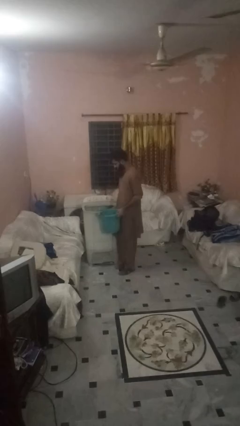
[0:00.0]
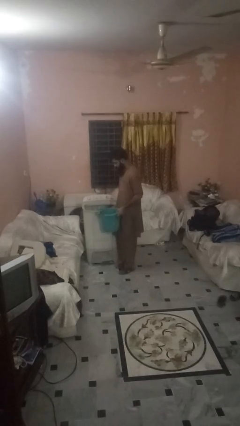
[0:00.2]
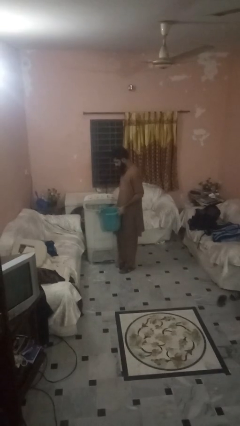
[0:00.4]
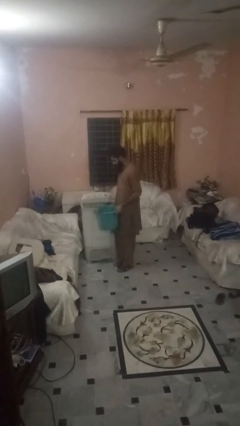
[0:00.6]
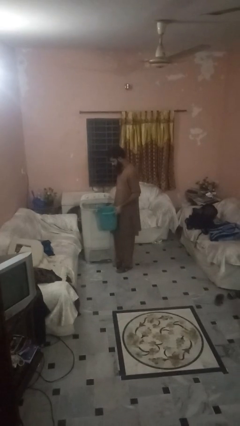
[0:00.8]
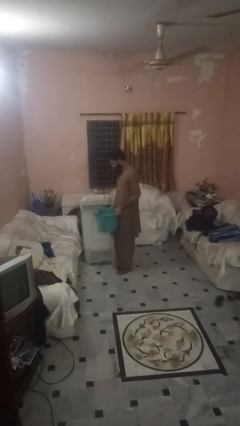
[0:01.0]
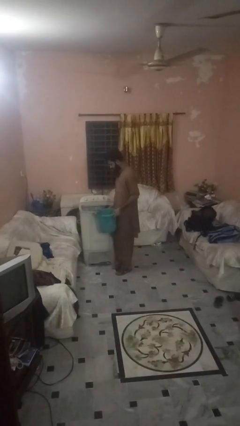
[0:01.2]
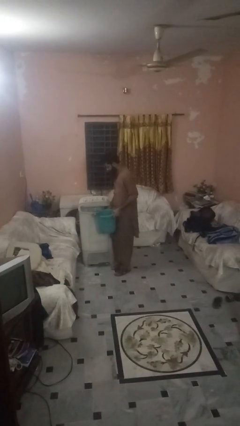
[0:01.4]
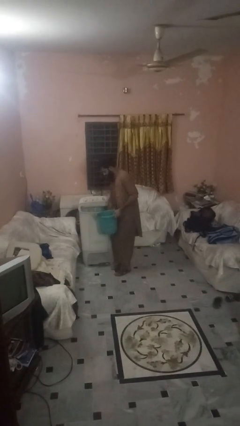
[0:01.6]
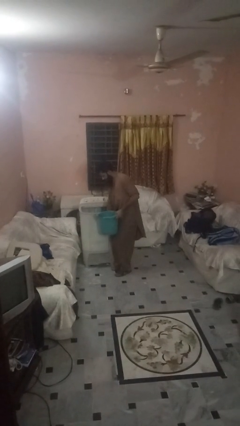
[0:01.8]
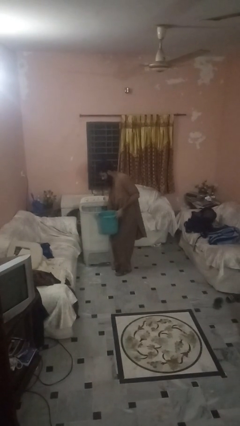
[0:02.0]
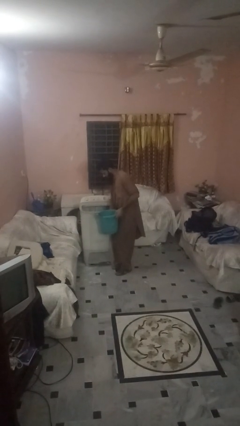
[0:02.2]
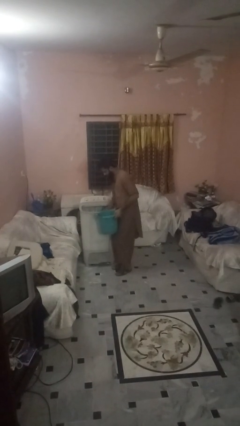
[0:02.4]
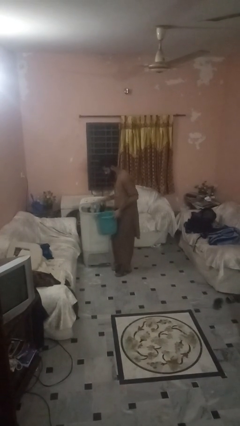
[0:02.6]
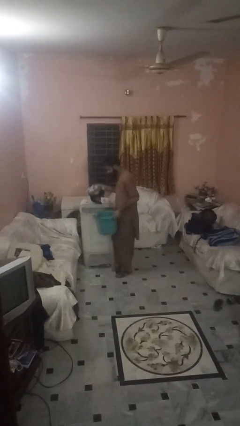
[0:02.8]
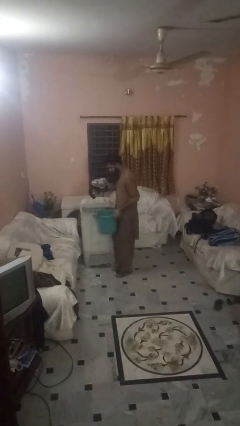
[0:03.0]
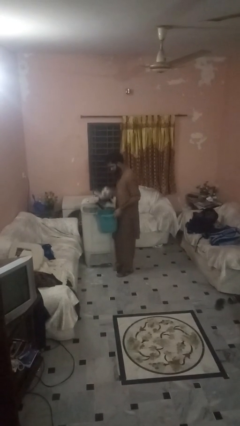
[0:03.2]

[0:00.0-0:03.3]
person unloads clotheswasher

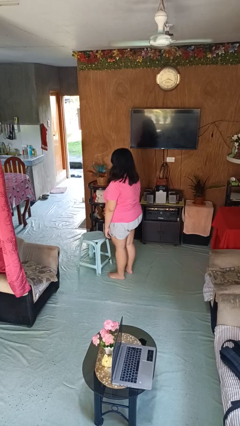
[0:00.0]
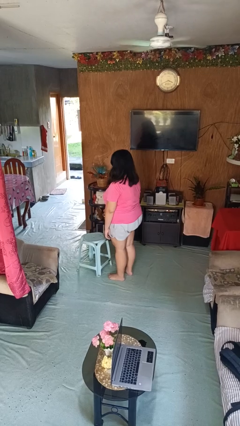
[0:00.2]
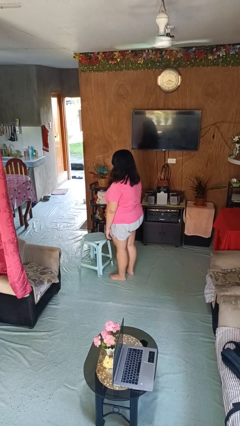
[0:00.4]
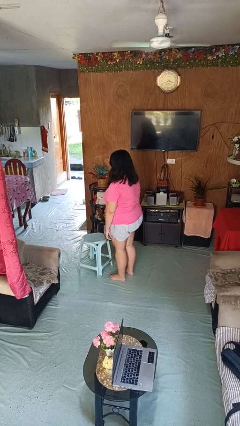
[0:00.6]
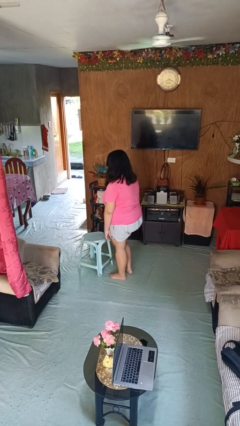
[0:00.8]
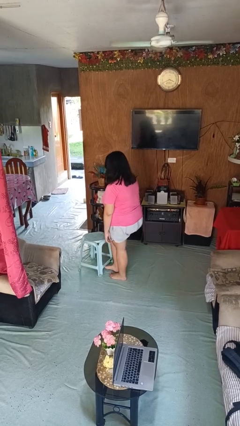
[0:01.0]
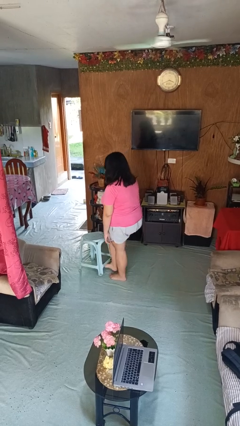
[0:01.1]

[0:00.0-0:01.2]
person knocks over furniture

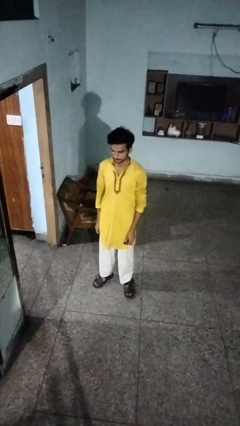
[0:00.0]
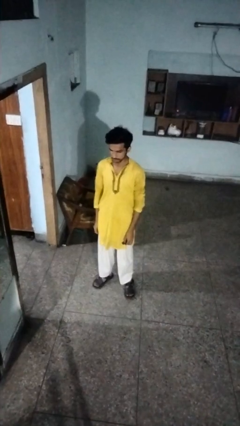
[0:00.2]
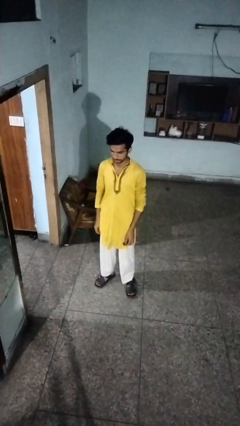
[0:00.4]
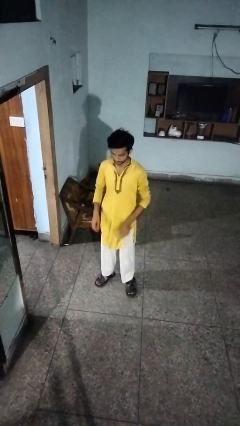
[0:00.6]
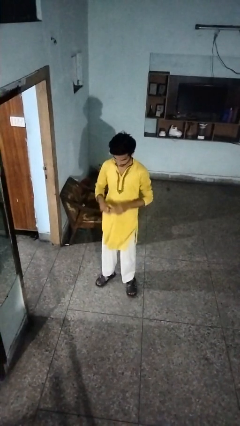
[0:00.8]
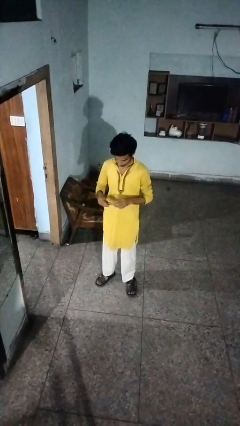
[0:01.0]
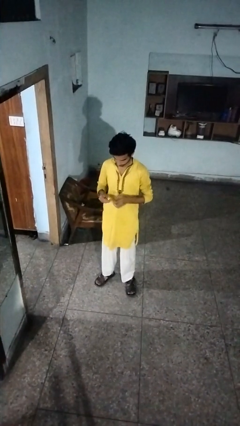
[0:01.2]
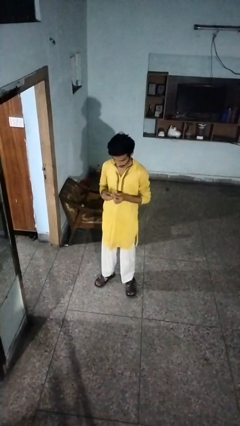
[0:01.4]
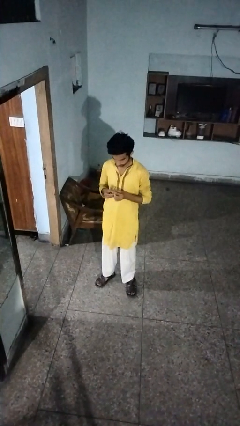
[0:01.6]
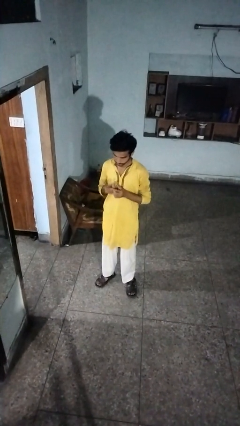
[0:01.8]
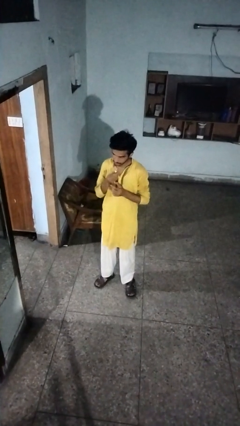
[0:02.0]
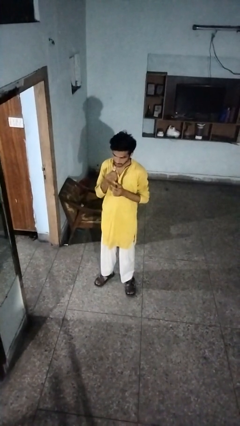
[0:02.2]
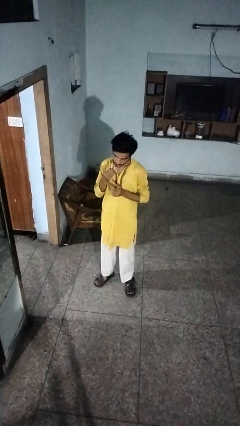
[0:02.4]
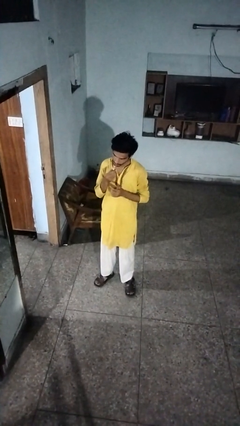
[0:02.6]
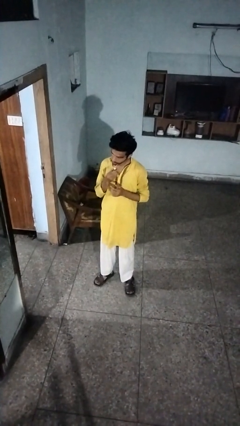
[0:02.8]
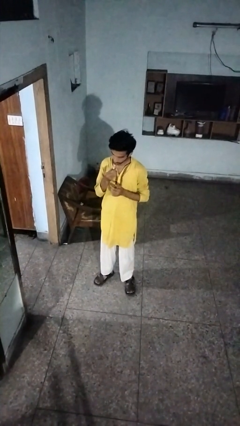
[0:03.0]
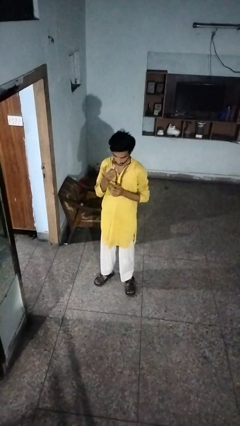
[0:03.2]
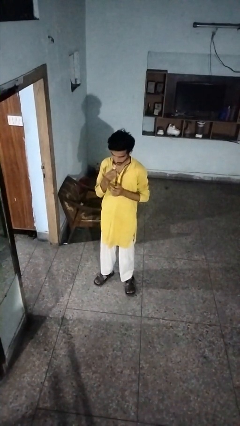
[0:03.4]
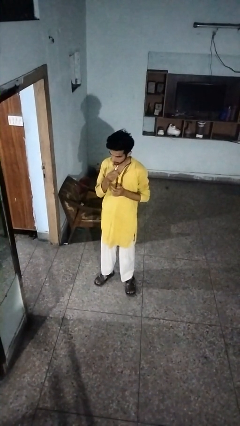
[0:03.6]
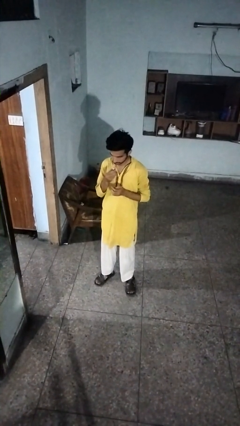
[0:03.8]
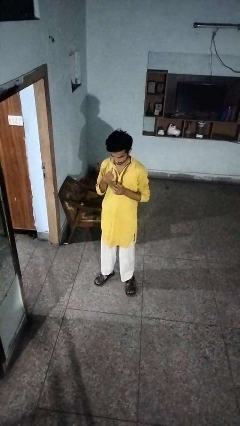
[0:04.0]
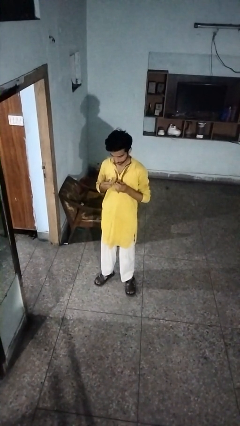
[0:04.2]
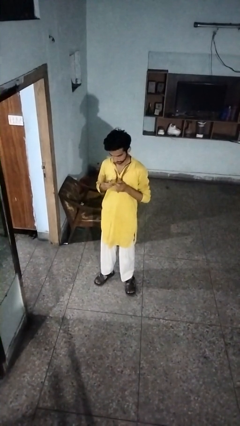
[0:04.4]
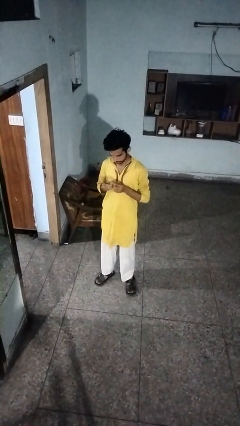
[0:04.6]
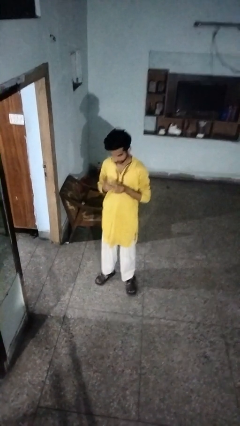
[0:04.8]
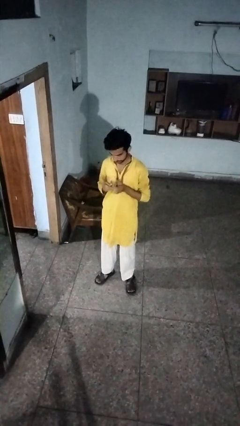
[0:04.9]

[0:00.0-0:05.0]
person applies lip makeup

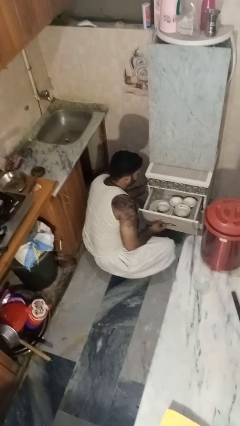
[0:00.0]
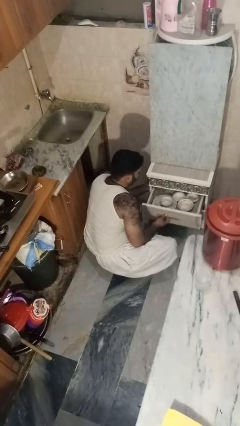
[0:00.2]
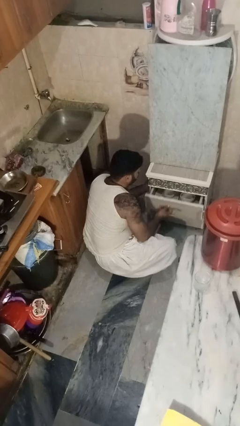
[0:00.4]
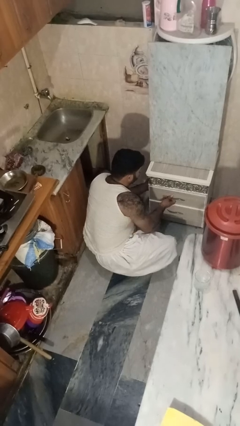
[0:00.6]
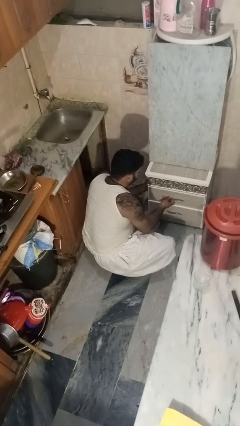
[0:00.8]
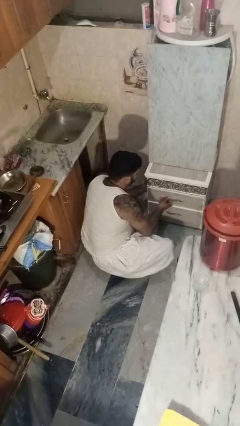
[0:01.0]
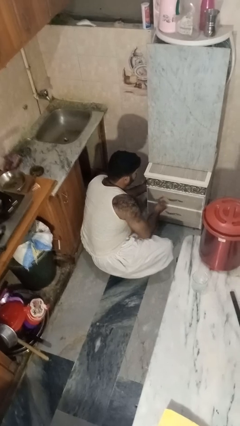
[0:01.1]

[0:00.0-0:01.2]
person closes kitchen drawer

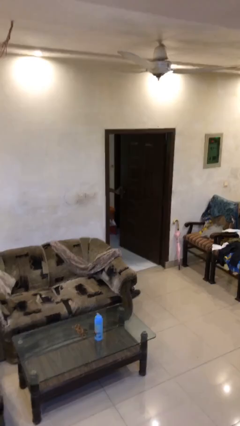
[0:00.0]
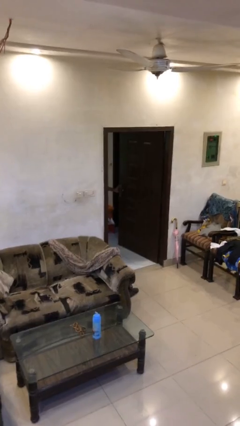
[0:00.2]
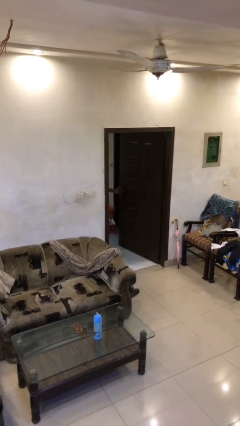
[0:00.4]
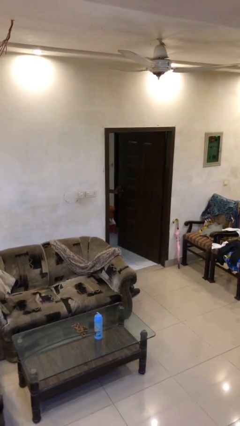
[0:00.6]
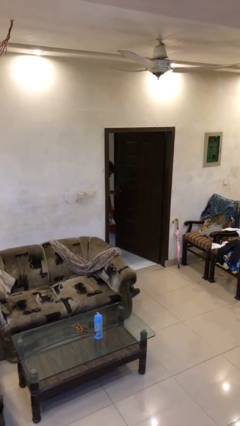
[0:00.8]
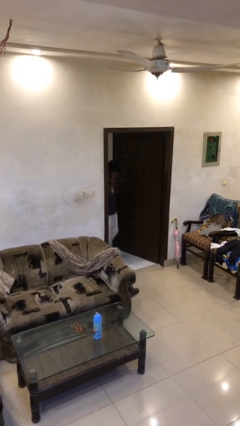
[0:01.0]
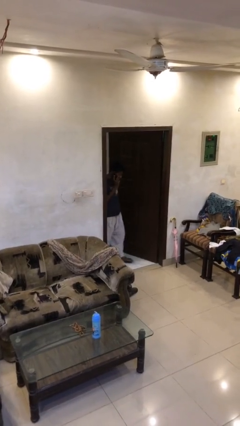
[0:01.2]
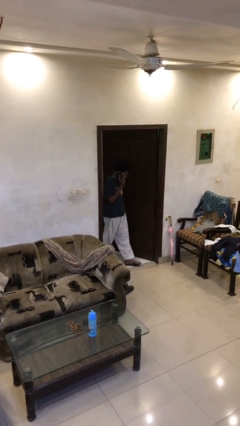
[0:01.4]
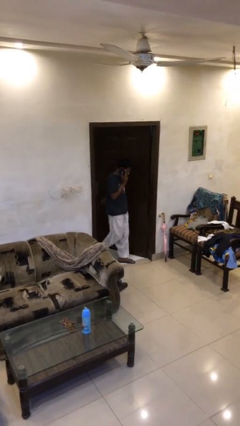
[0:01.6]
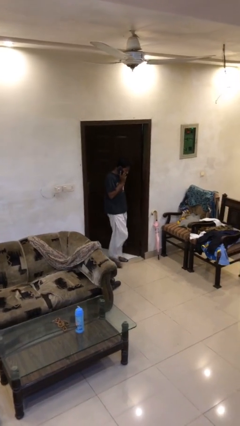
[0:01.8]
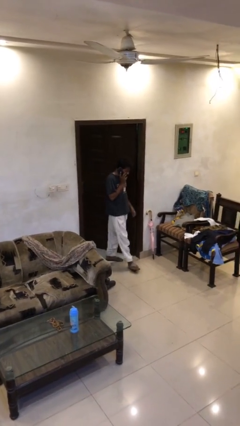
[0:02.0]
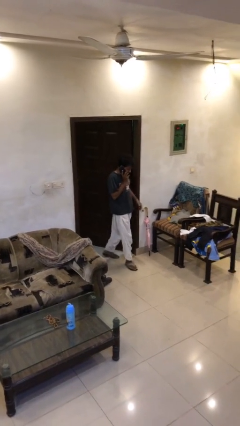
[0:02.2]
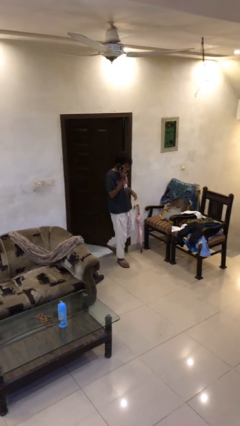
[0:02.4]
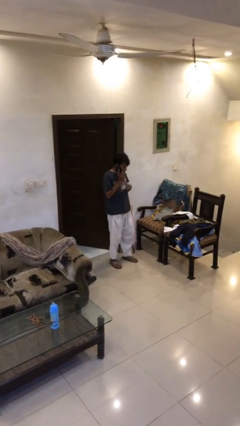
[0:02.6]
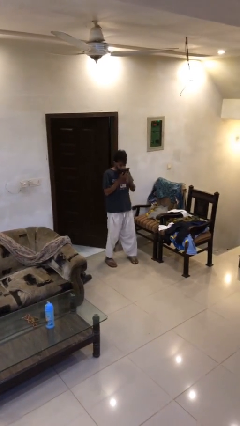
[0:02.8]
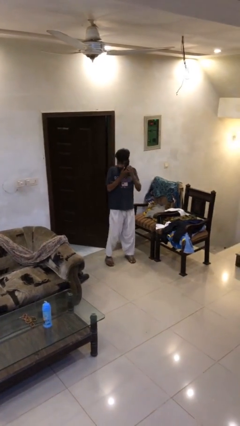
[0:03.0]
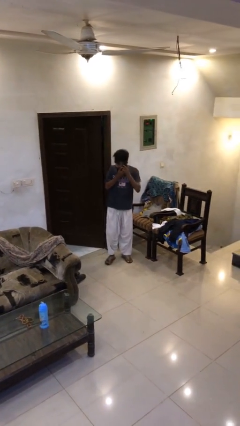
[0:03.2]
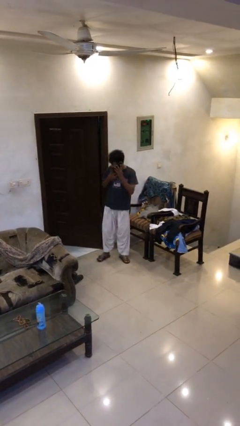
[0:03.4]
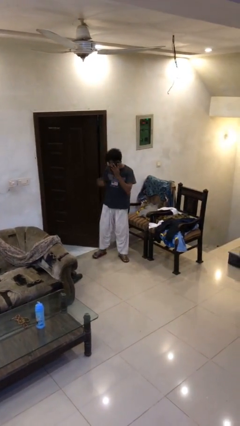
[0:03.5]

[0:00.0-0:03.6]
person enters scene through structure

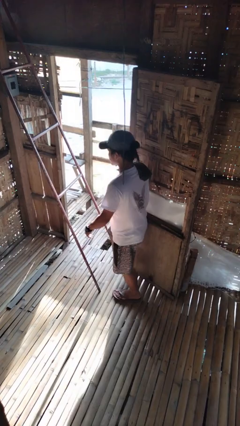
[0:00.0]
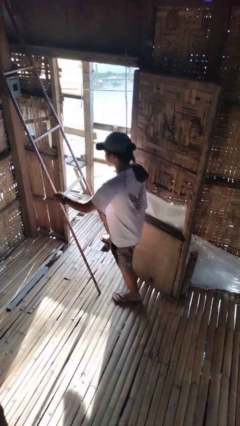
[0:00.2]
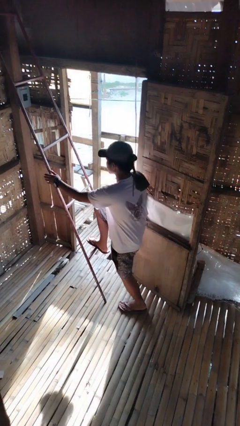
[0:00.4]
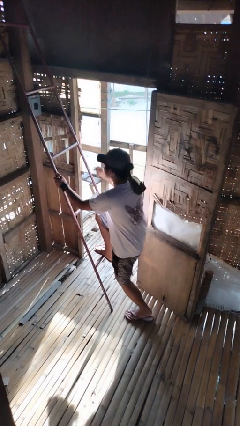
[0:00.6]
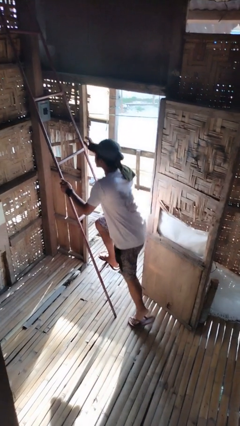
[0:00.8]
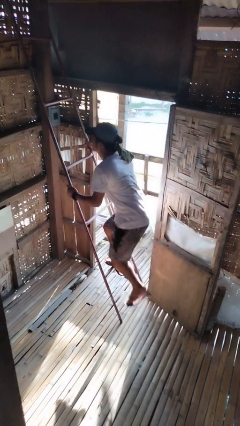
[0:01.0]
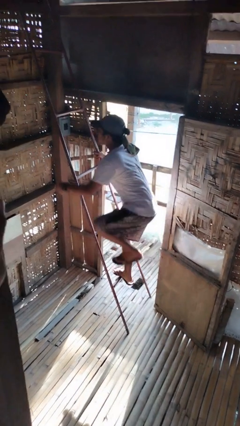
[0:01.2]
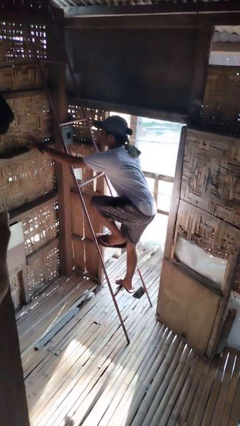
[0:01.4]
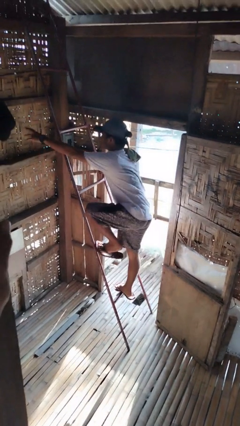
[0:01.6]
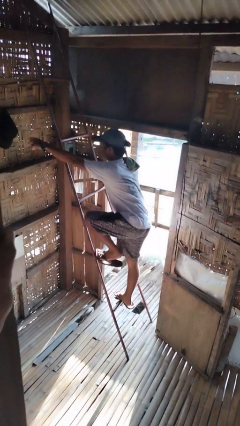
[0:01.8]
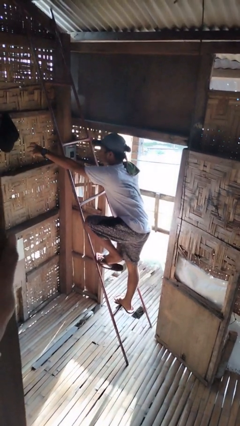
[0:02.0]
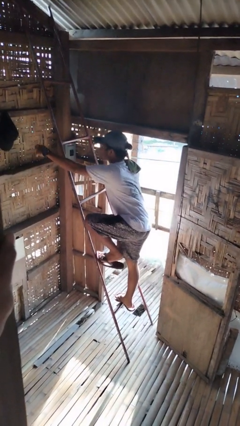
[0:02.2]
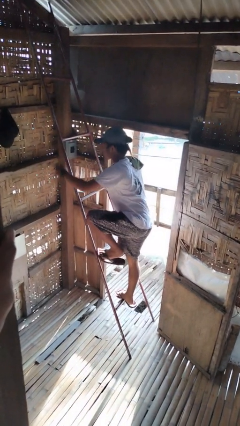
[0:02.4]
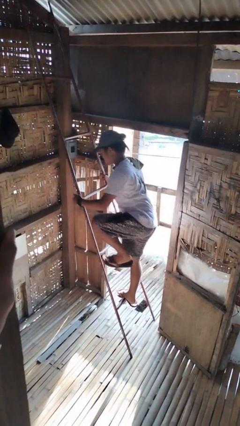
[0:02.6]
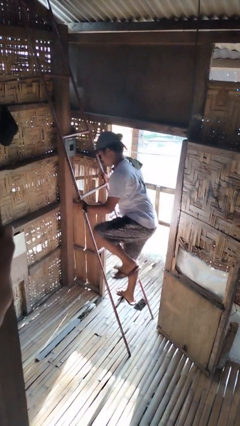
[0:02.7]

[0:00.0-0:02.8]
person climbs up ladder

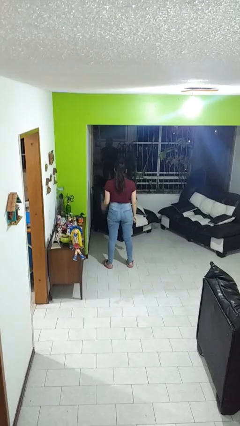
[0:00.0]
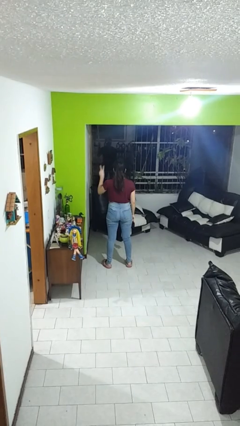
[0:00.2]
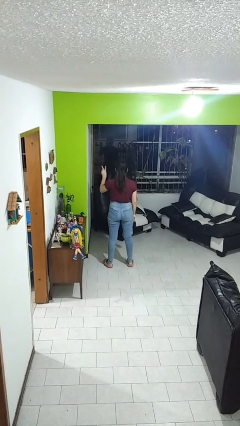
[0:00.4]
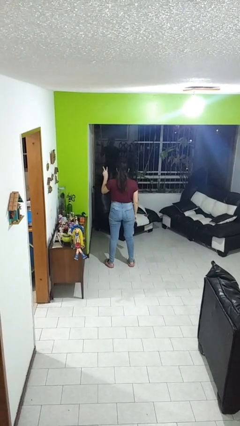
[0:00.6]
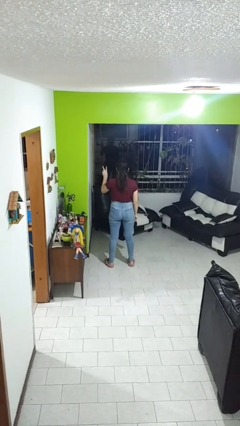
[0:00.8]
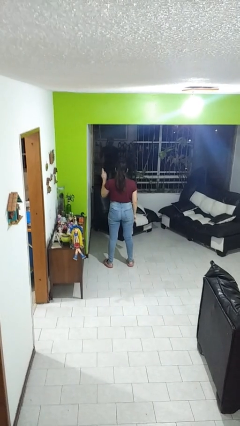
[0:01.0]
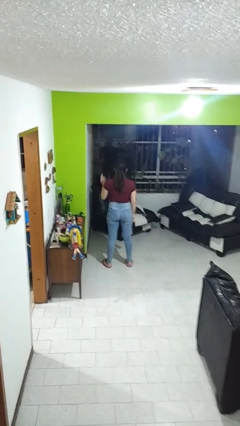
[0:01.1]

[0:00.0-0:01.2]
person gestures peace
